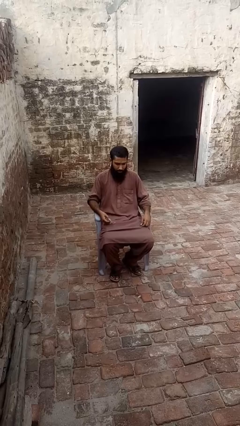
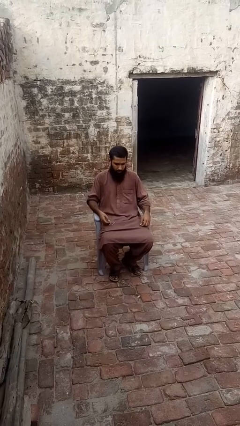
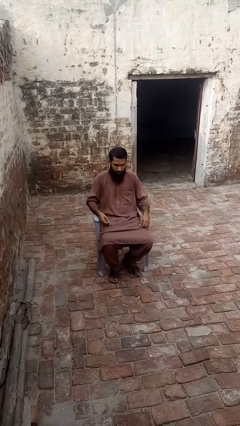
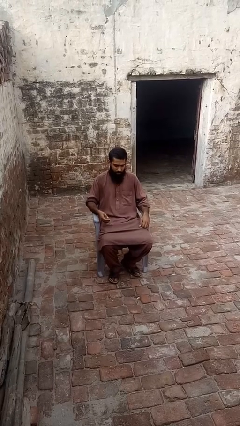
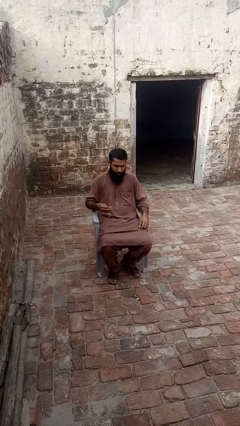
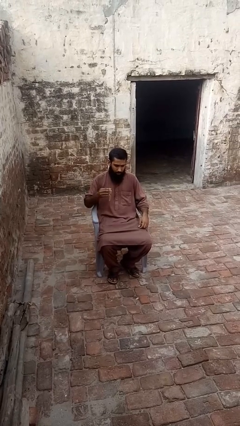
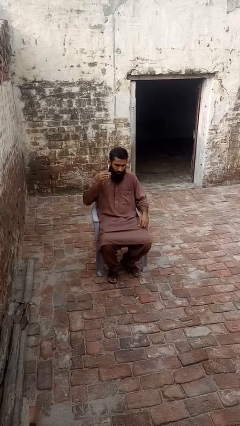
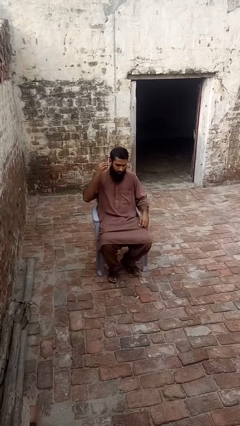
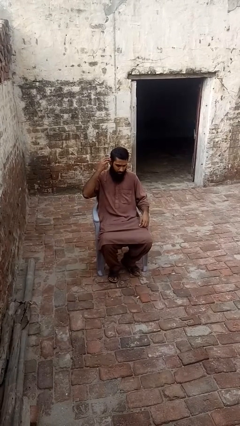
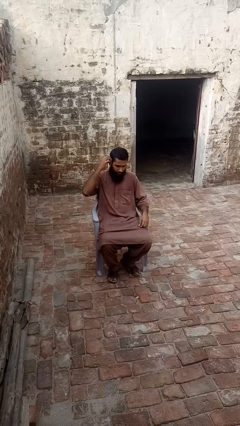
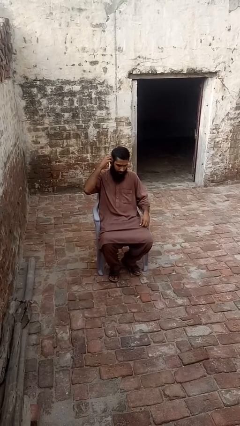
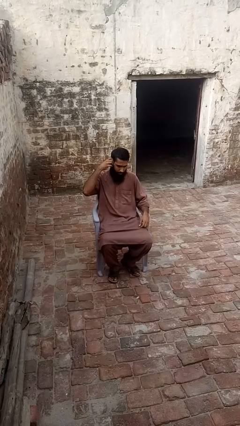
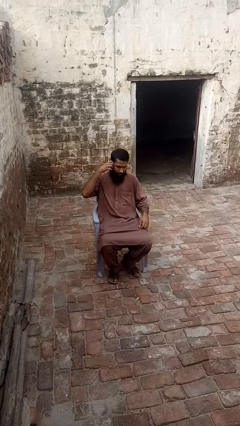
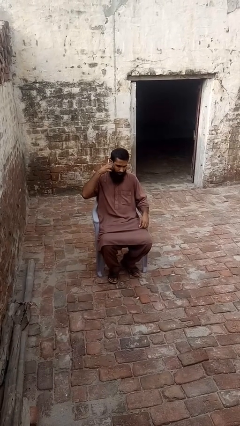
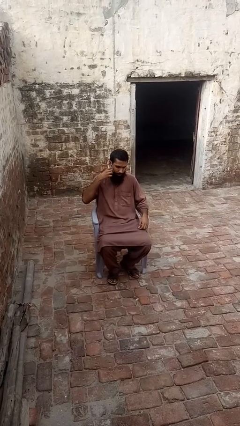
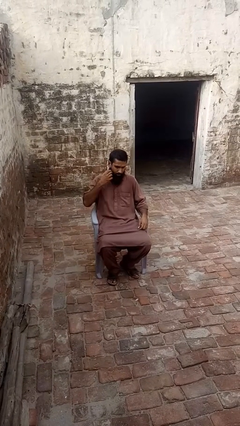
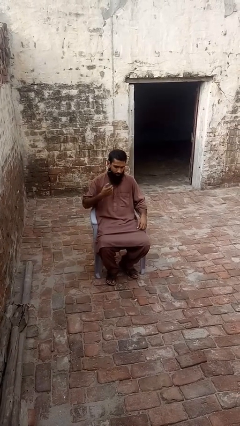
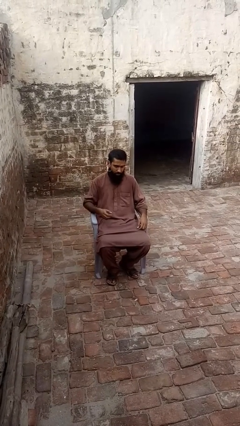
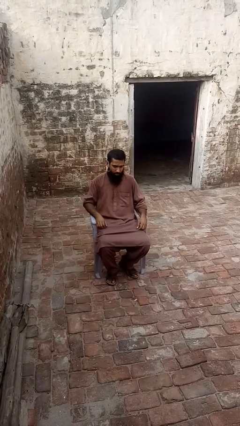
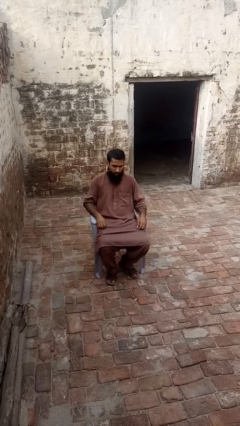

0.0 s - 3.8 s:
person puts on earrings

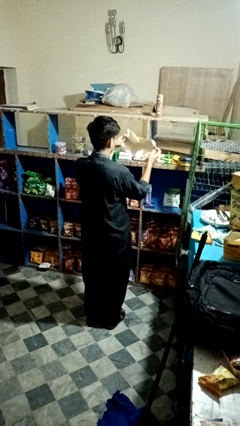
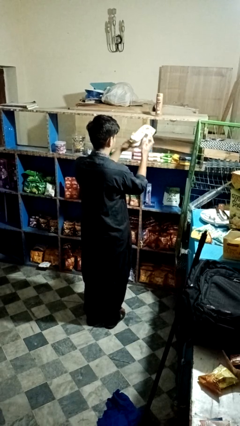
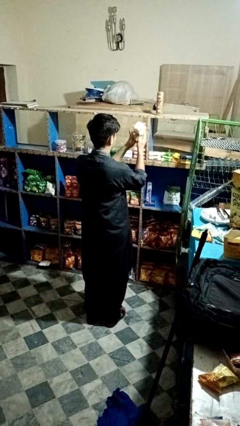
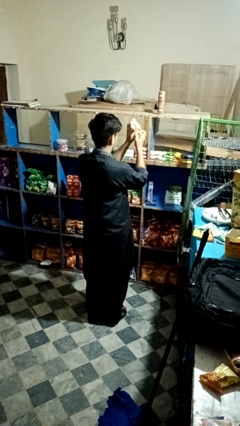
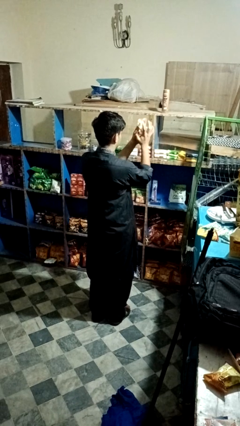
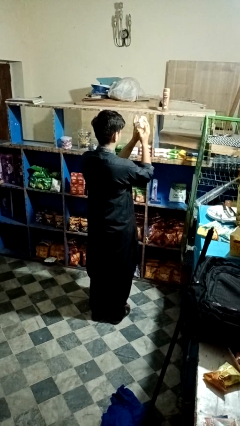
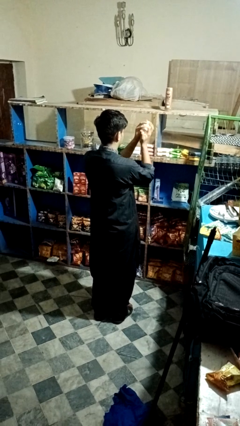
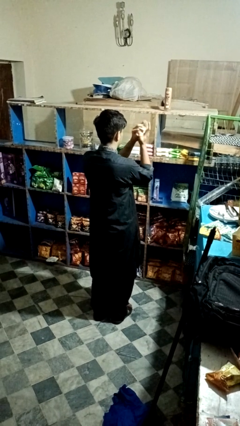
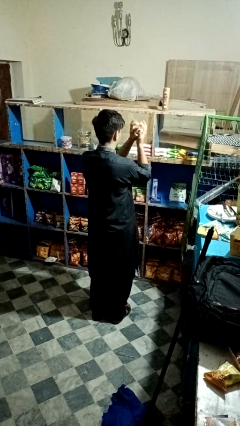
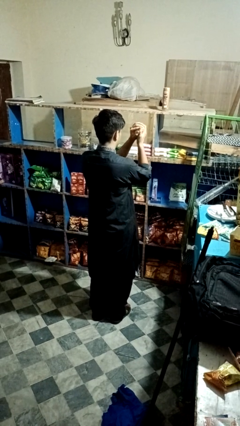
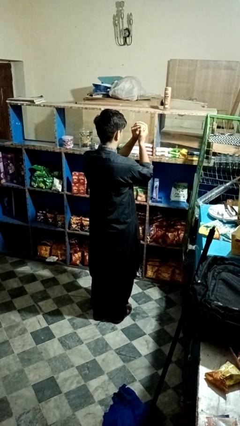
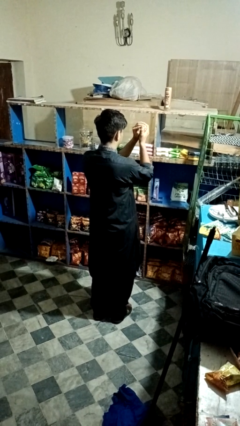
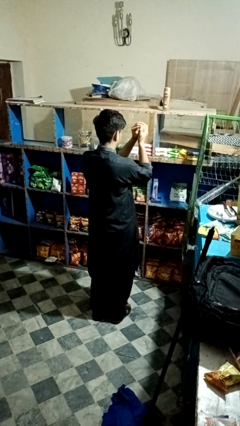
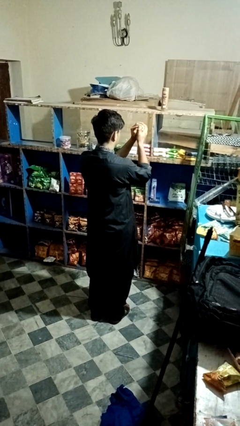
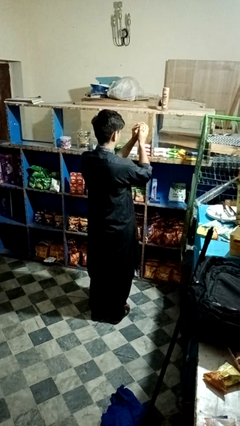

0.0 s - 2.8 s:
person crumples paper

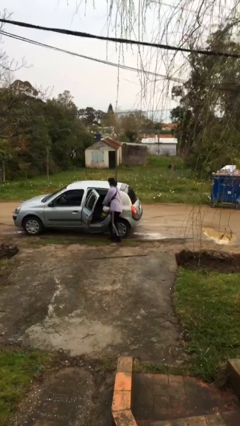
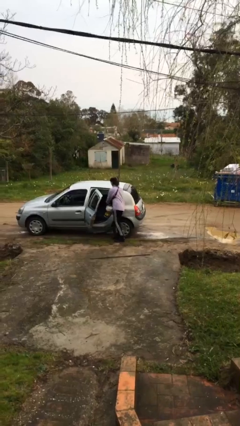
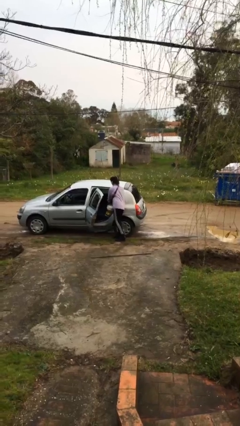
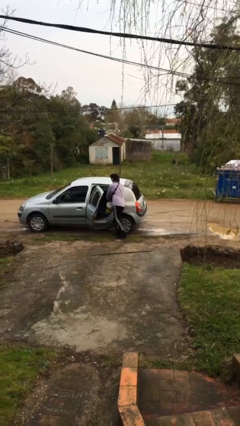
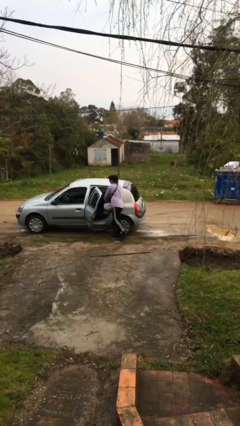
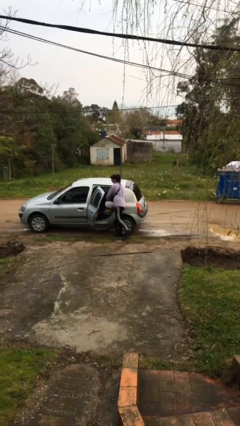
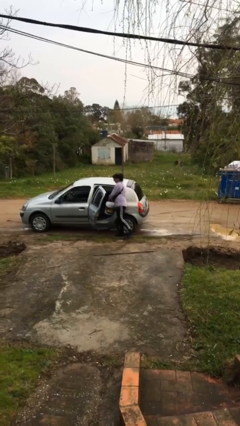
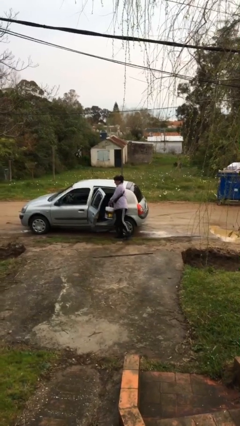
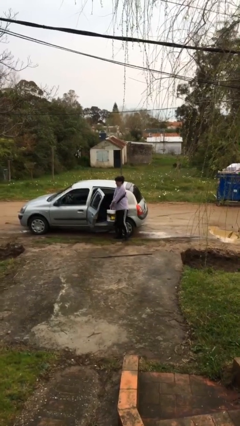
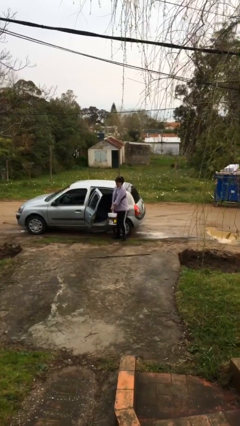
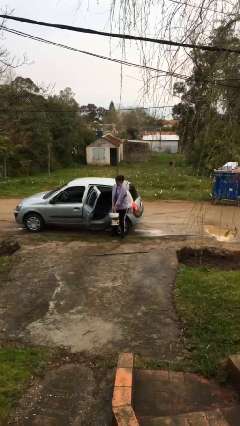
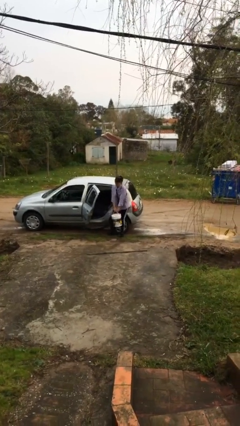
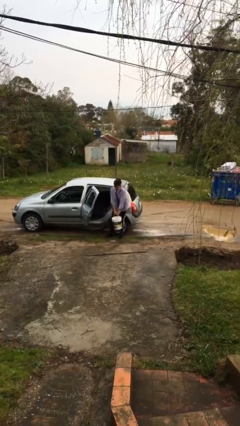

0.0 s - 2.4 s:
person unloads car

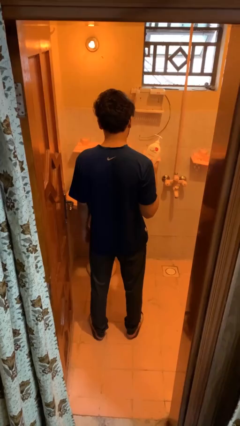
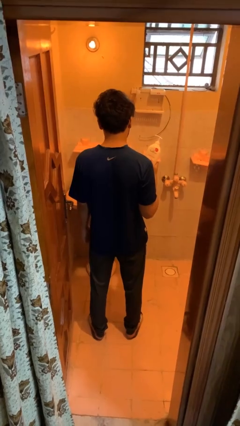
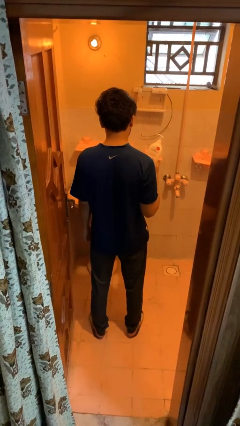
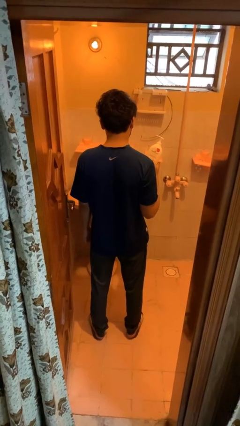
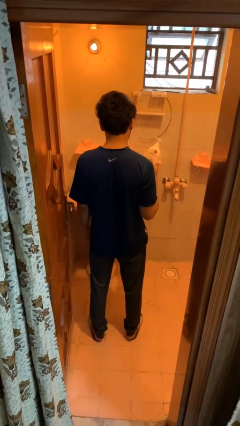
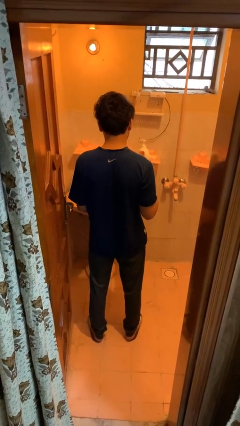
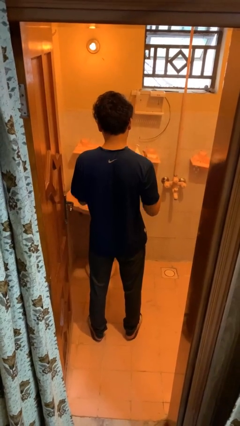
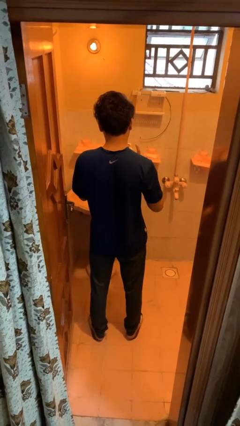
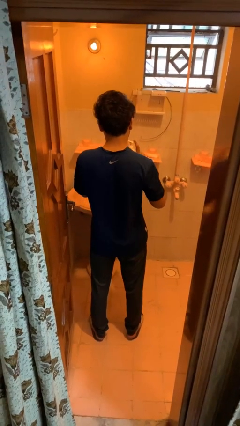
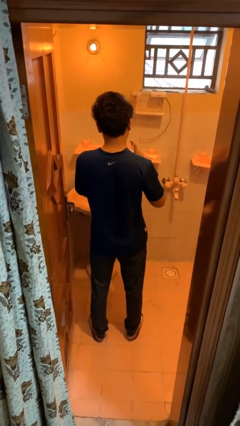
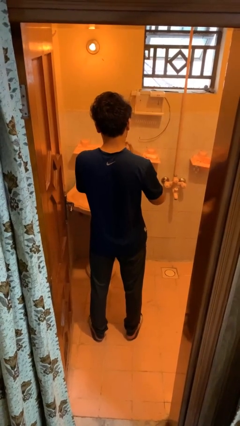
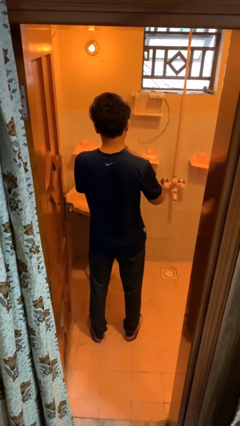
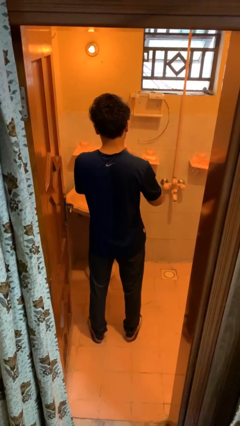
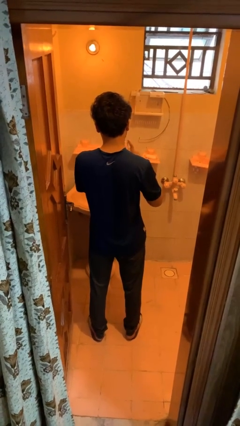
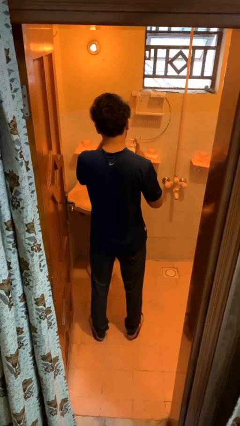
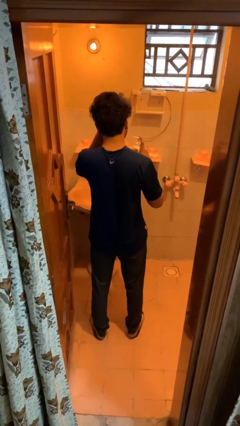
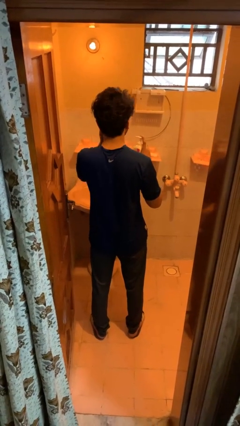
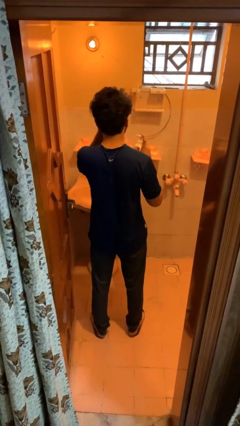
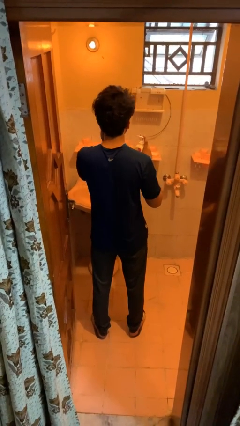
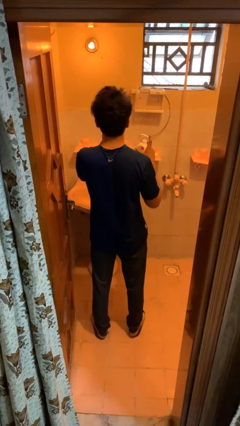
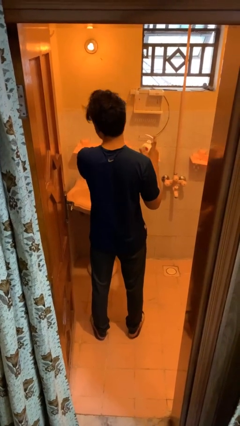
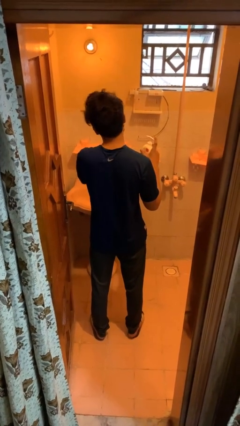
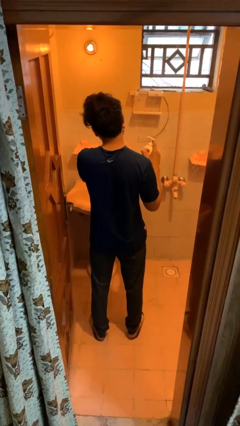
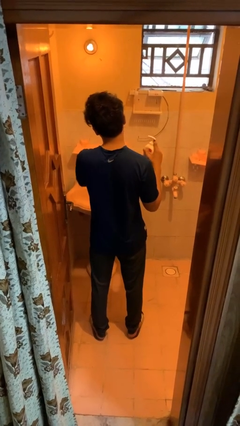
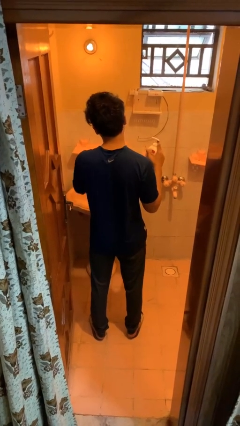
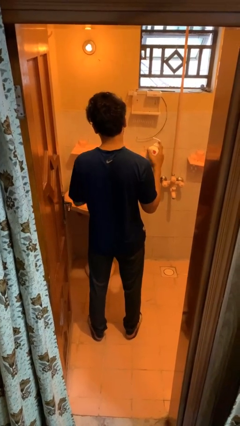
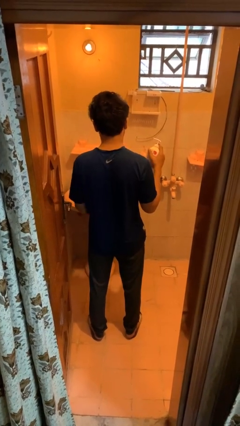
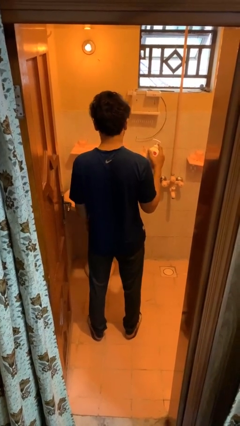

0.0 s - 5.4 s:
person applies sunscreen

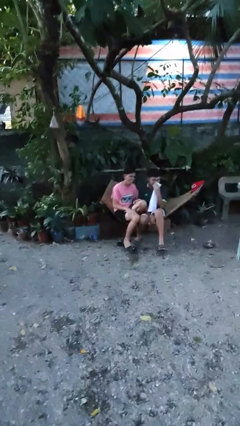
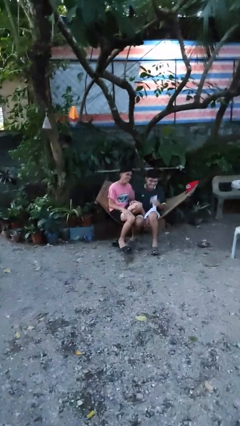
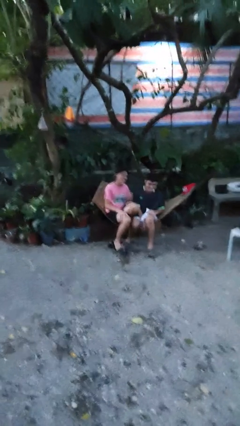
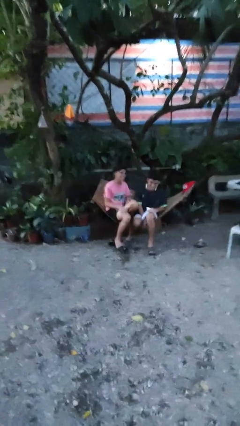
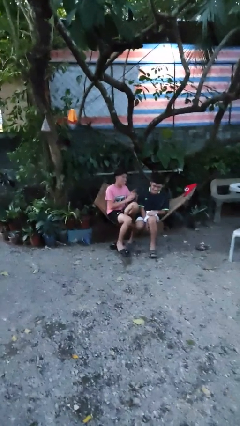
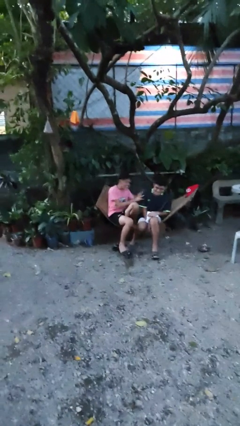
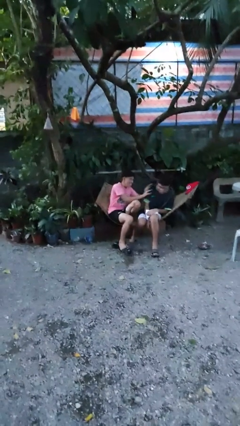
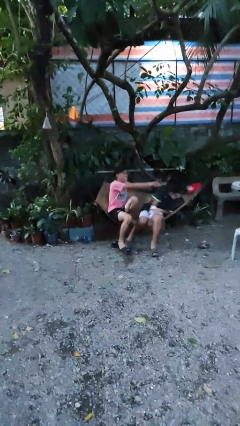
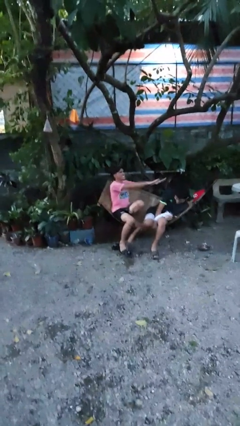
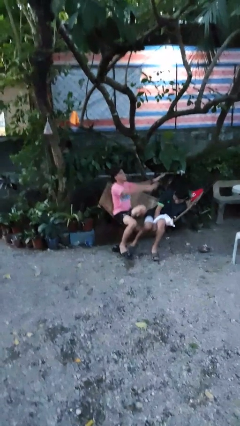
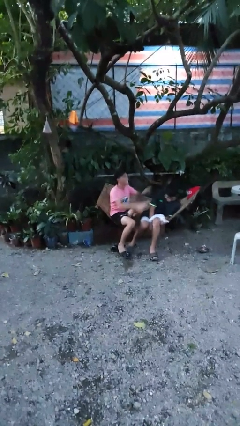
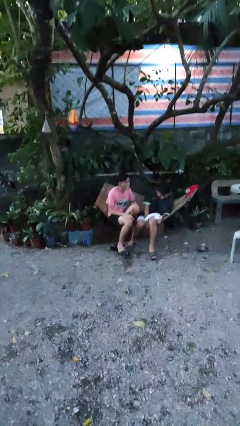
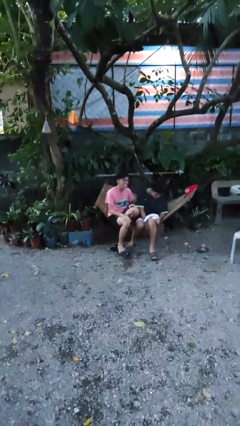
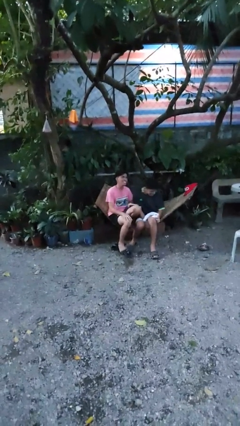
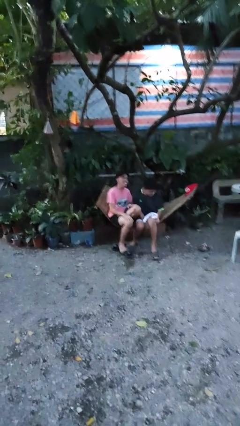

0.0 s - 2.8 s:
person shoves person
